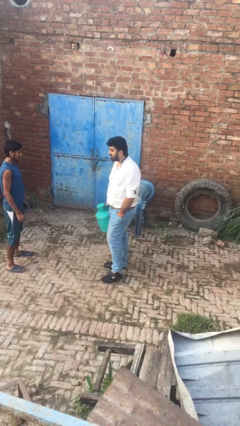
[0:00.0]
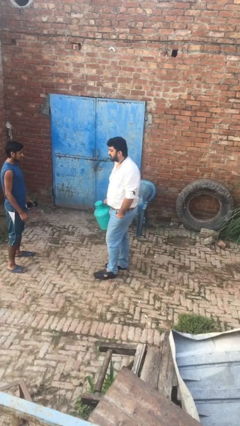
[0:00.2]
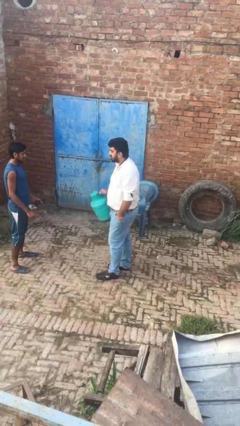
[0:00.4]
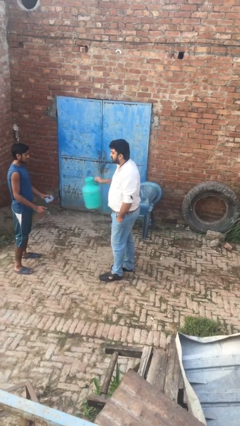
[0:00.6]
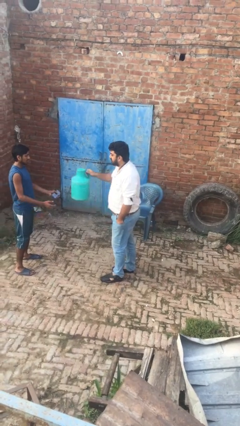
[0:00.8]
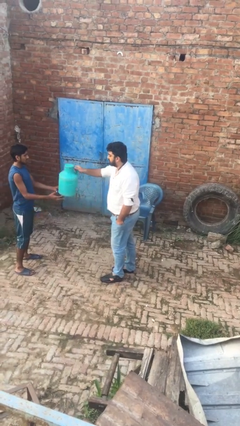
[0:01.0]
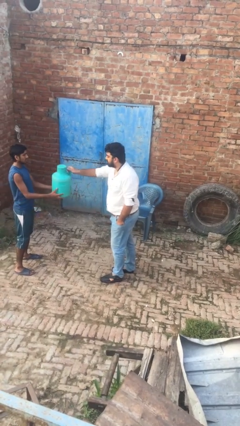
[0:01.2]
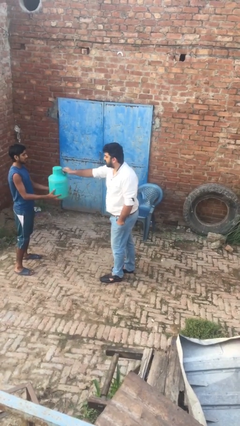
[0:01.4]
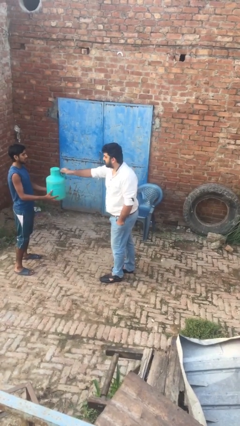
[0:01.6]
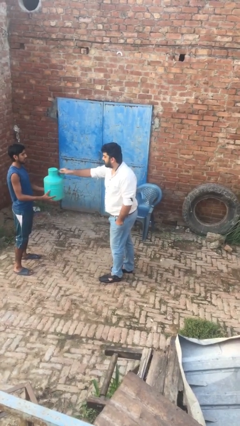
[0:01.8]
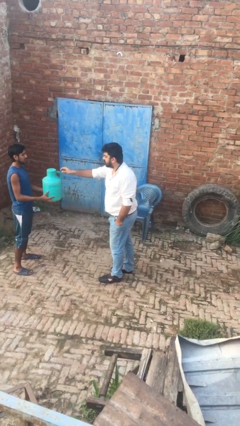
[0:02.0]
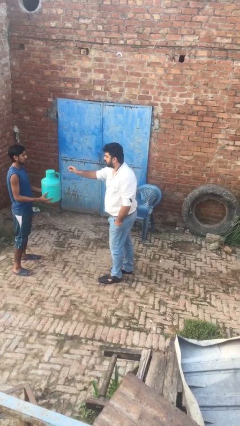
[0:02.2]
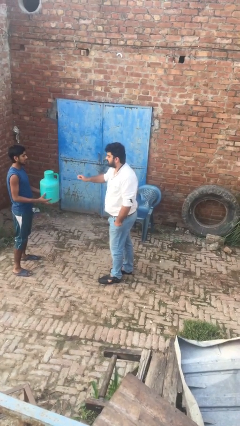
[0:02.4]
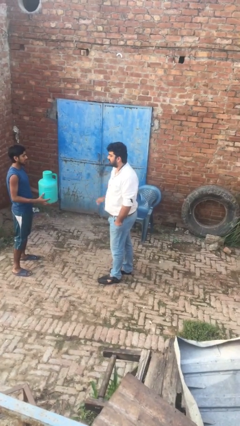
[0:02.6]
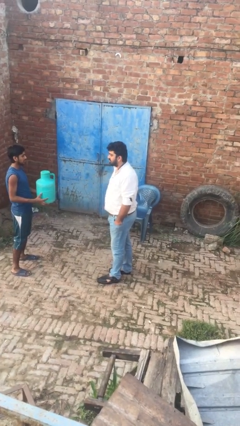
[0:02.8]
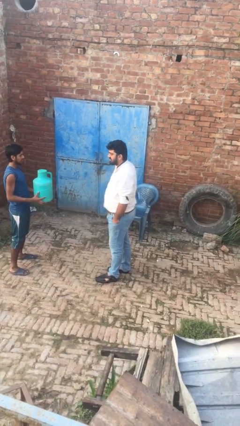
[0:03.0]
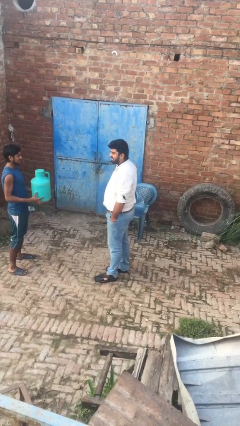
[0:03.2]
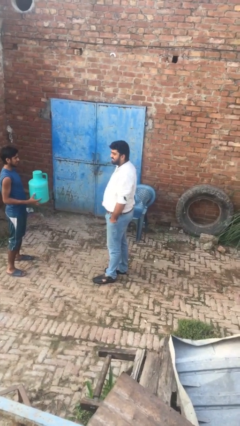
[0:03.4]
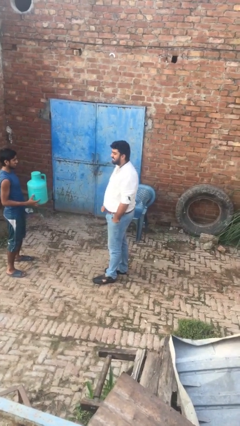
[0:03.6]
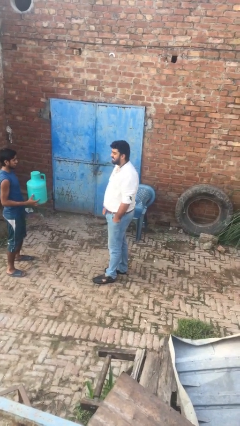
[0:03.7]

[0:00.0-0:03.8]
person transfers object to person

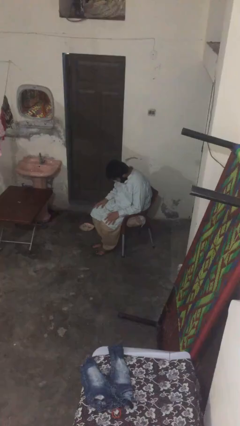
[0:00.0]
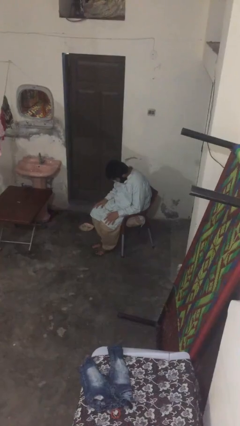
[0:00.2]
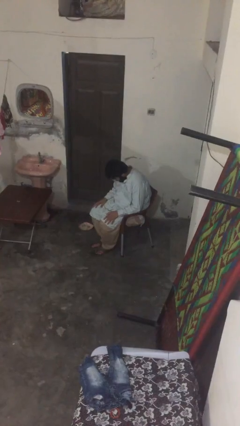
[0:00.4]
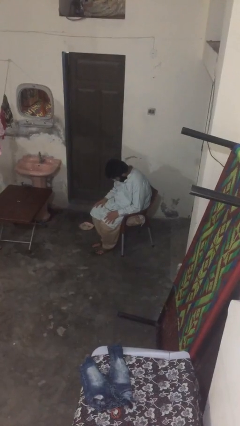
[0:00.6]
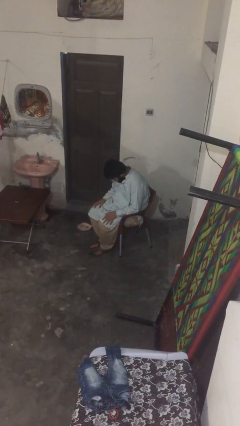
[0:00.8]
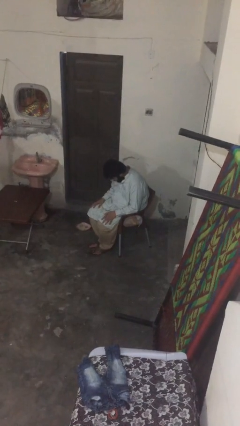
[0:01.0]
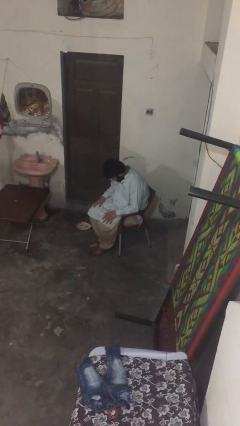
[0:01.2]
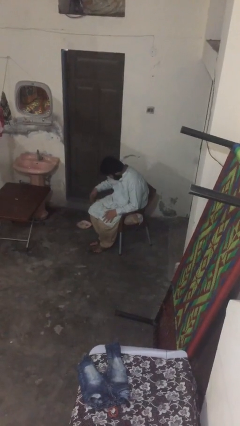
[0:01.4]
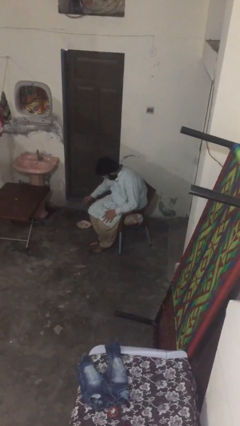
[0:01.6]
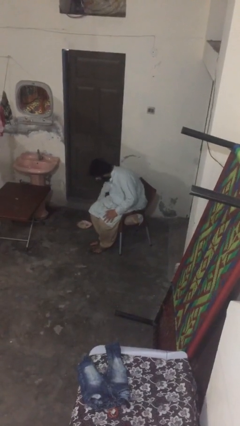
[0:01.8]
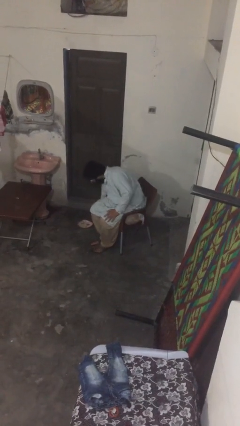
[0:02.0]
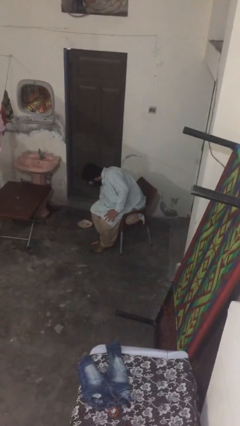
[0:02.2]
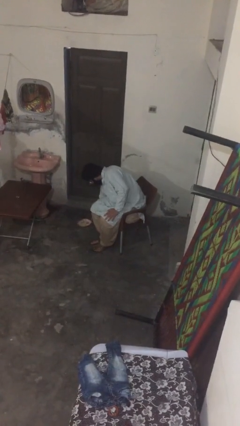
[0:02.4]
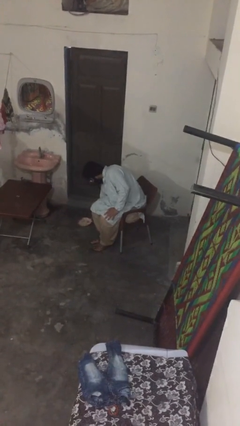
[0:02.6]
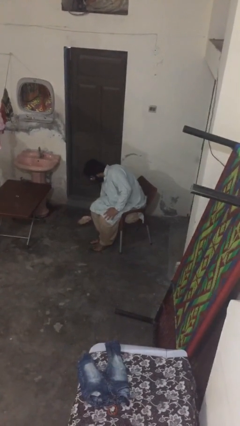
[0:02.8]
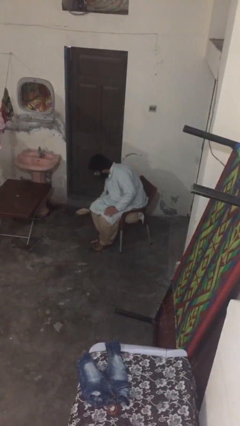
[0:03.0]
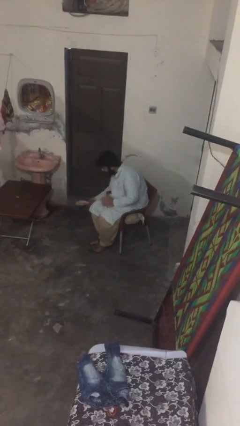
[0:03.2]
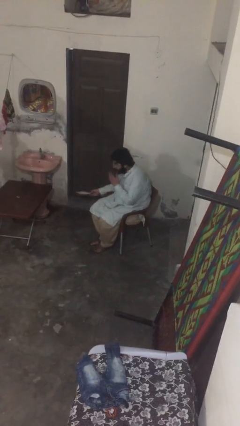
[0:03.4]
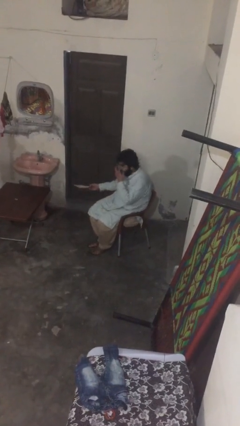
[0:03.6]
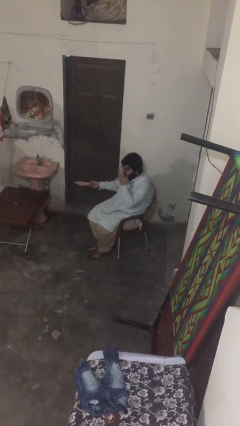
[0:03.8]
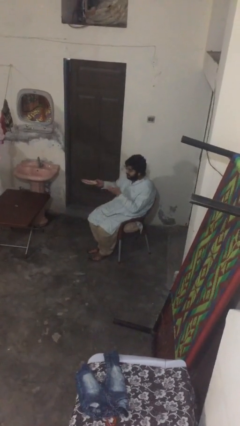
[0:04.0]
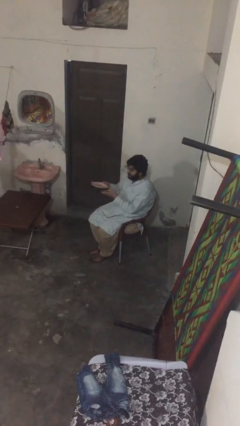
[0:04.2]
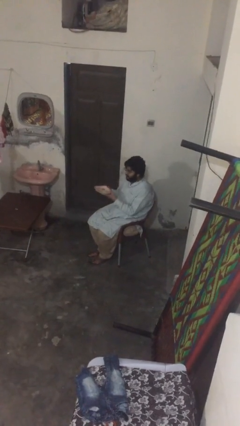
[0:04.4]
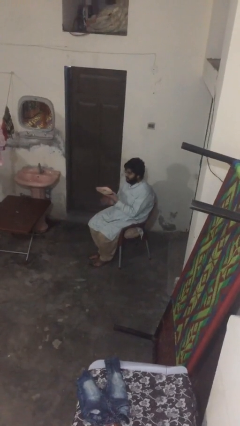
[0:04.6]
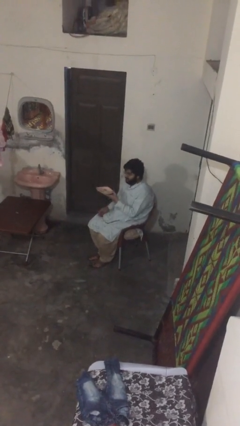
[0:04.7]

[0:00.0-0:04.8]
person picks up object from floor

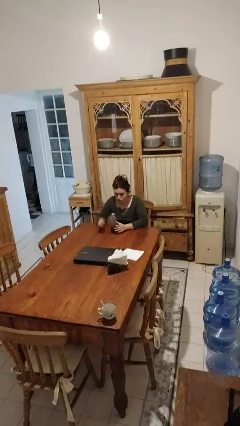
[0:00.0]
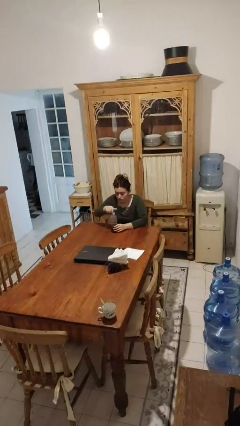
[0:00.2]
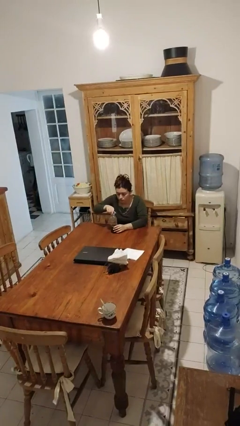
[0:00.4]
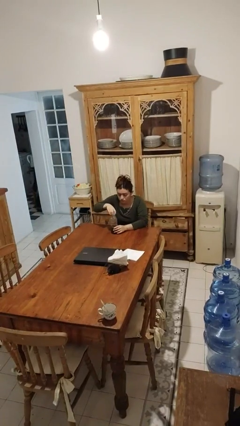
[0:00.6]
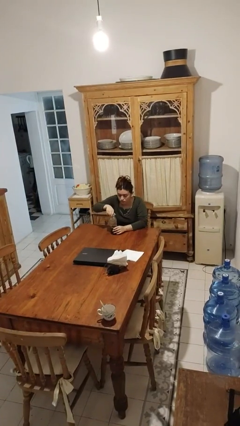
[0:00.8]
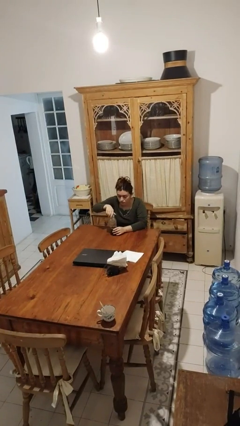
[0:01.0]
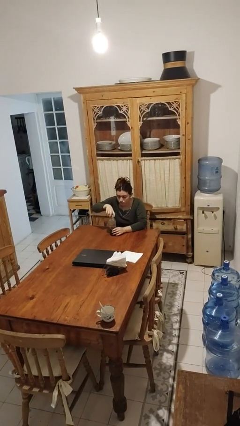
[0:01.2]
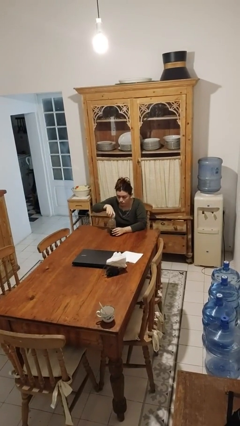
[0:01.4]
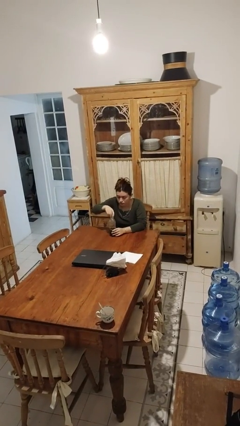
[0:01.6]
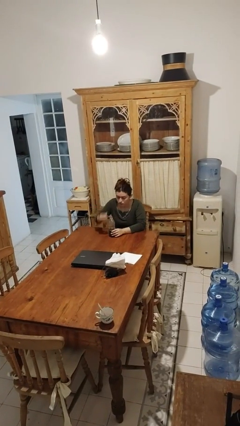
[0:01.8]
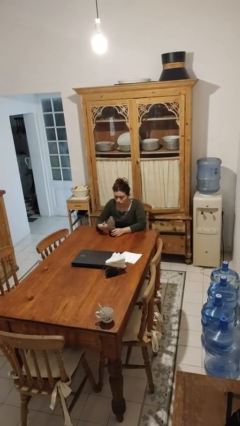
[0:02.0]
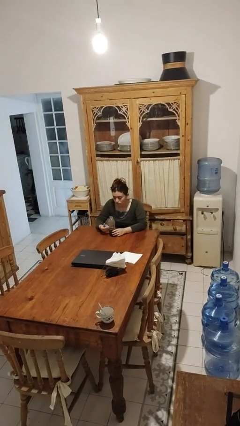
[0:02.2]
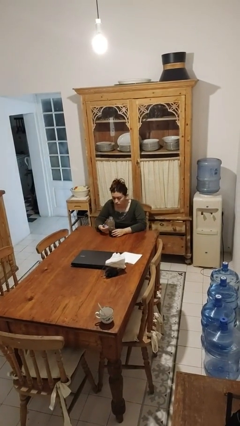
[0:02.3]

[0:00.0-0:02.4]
person unscrews lid from bottle

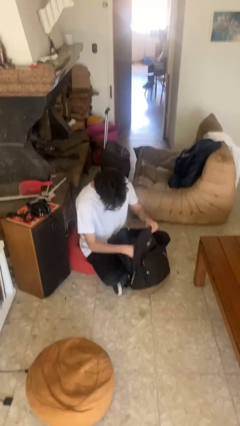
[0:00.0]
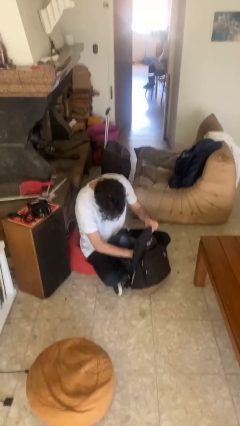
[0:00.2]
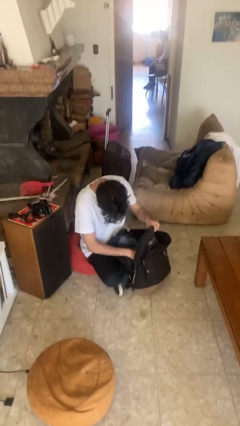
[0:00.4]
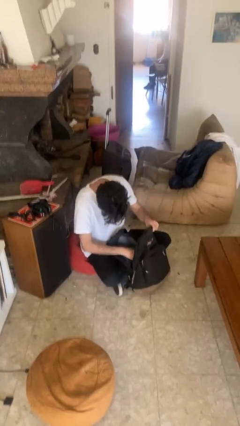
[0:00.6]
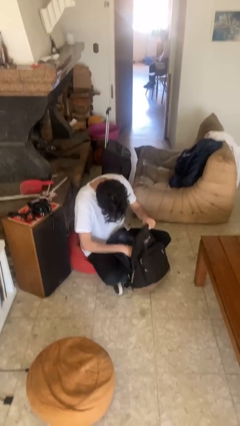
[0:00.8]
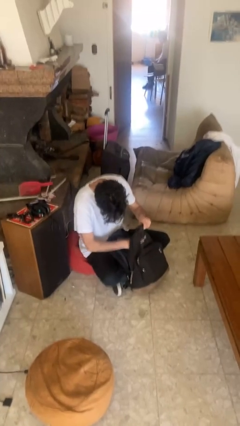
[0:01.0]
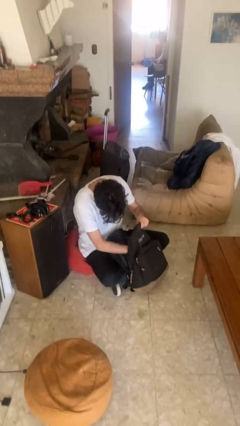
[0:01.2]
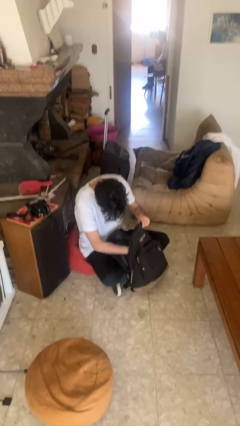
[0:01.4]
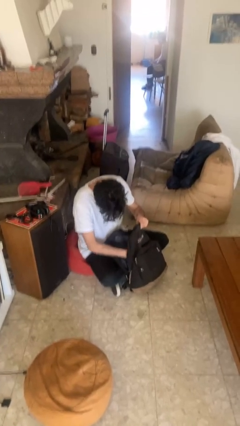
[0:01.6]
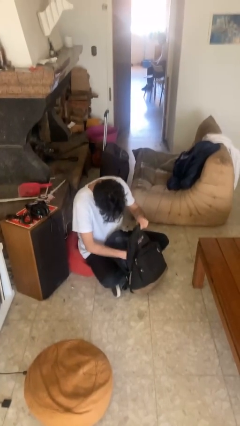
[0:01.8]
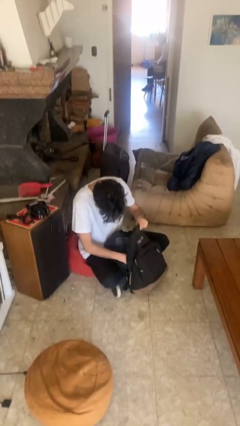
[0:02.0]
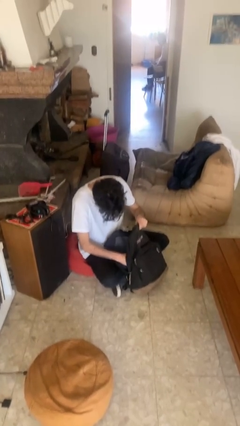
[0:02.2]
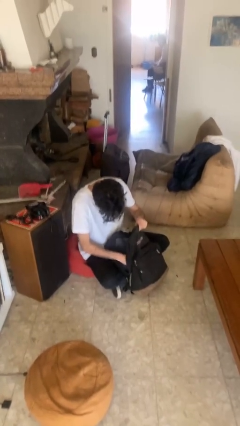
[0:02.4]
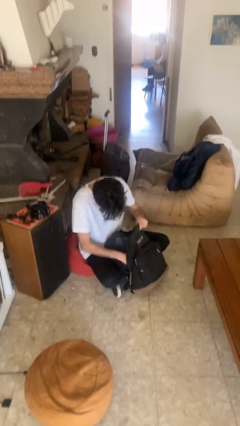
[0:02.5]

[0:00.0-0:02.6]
person searches in backpack

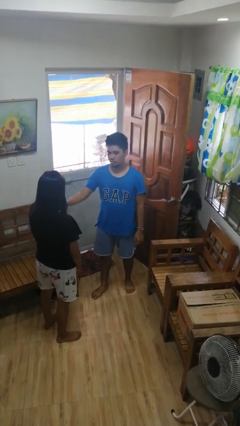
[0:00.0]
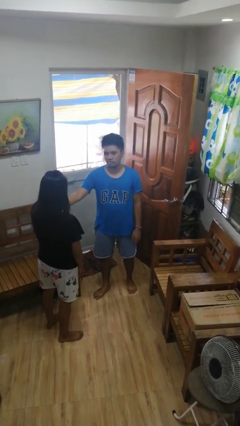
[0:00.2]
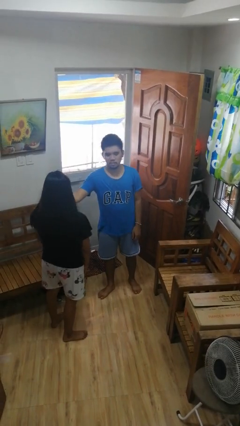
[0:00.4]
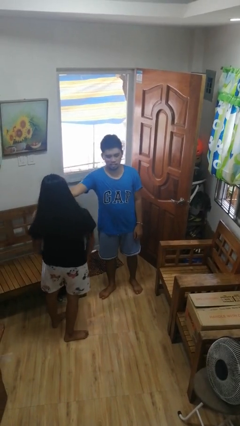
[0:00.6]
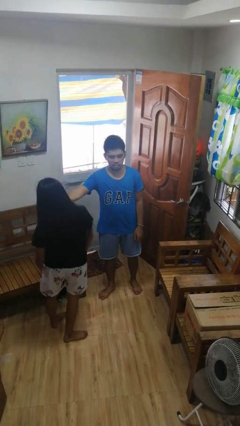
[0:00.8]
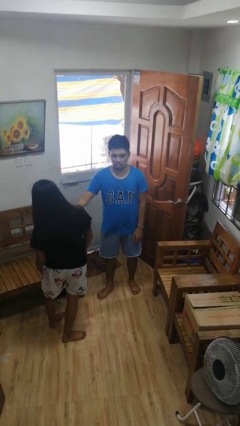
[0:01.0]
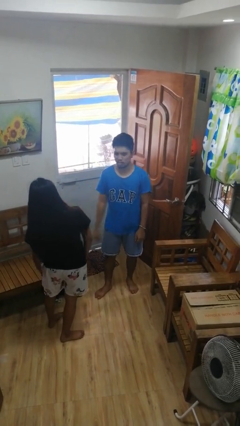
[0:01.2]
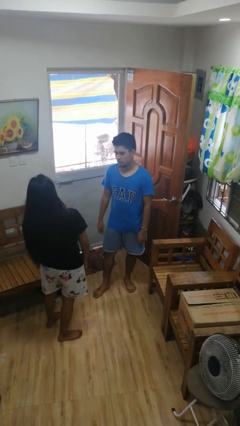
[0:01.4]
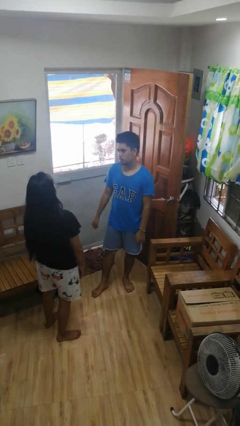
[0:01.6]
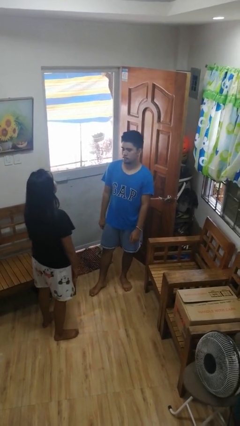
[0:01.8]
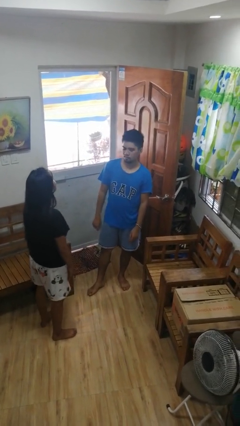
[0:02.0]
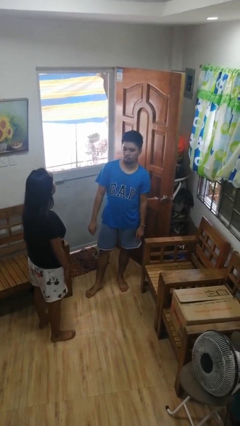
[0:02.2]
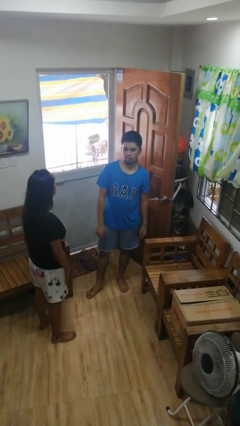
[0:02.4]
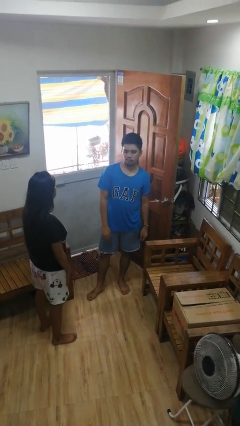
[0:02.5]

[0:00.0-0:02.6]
person shoves person

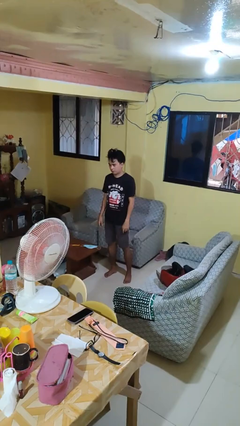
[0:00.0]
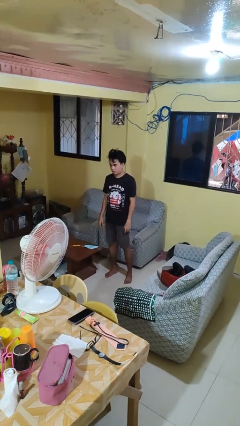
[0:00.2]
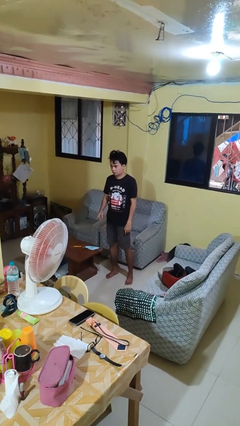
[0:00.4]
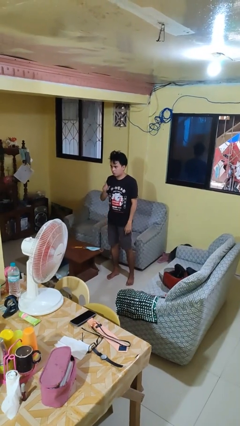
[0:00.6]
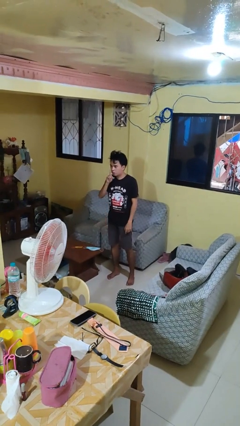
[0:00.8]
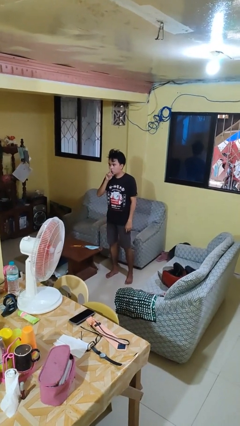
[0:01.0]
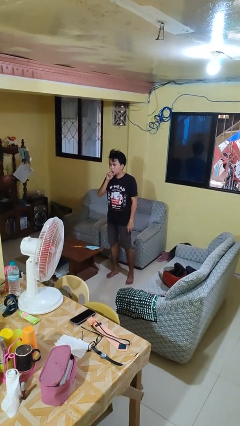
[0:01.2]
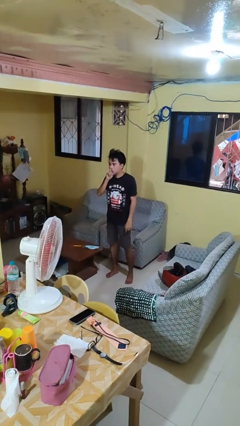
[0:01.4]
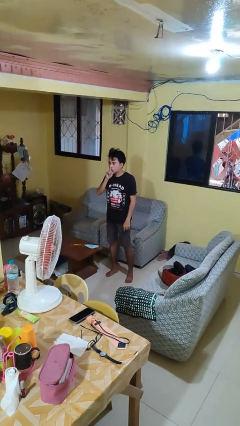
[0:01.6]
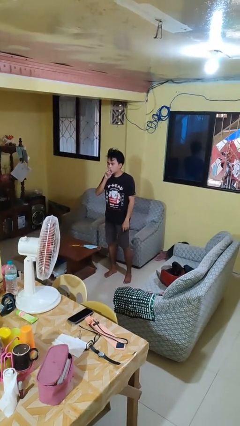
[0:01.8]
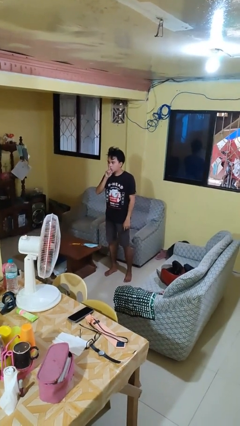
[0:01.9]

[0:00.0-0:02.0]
person gestures be quiet
